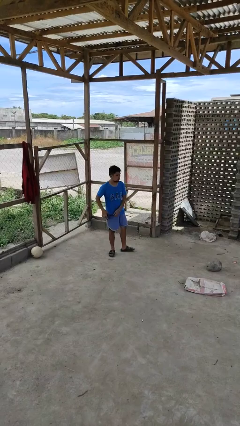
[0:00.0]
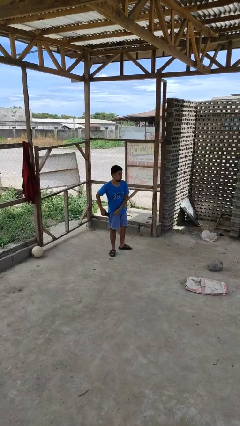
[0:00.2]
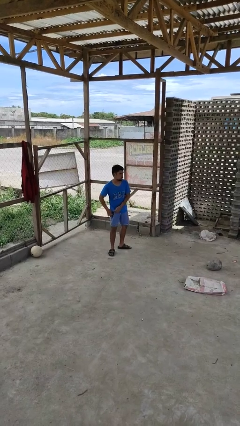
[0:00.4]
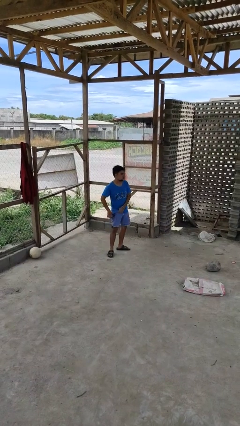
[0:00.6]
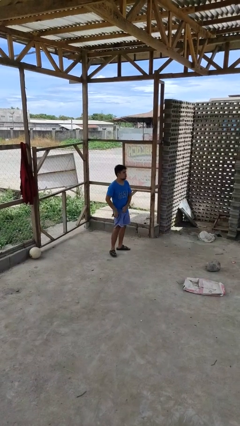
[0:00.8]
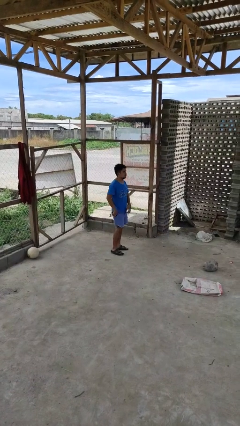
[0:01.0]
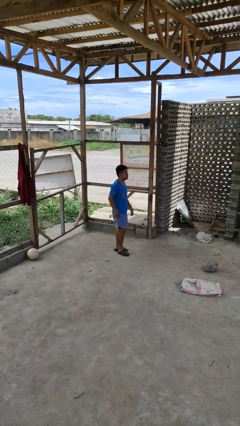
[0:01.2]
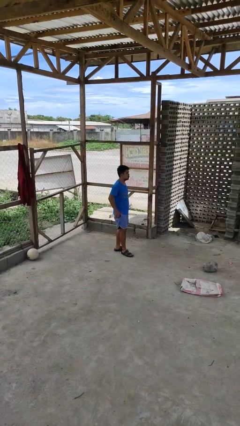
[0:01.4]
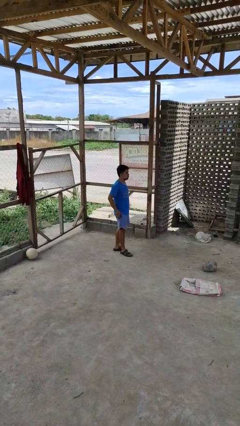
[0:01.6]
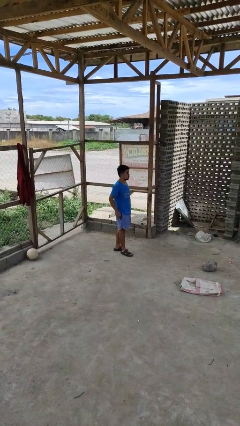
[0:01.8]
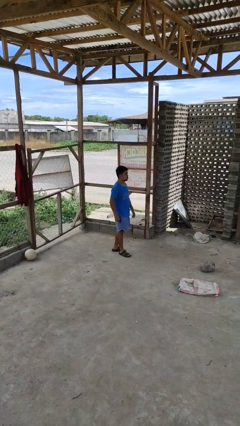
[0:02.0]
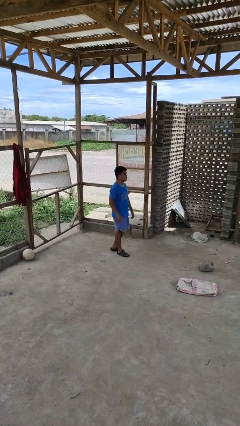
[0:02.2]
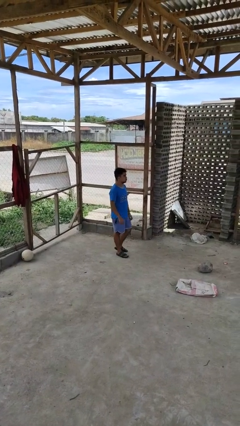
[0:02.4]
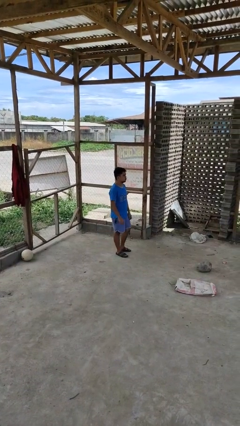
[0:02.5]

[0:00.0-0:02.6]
person puts phone into pocket

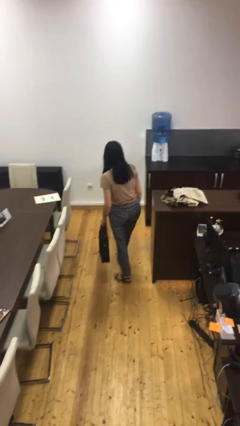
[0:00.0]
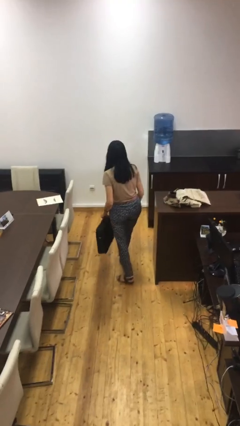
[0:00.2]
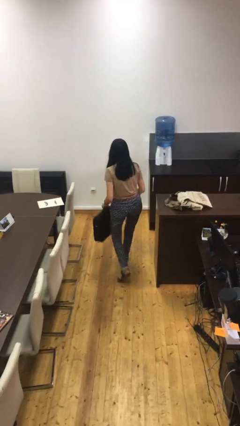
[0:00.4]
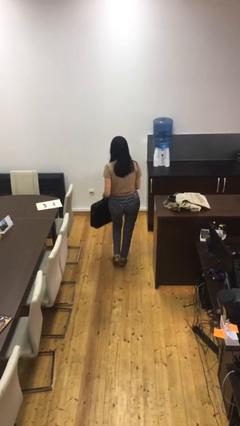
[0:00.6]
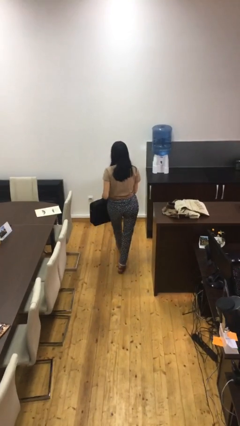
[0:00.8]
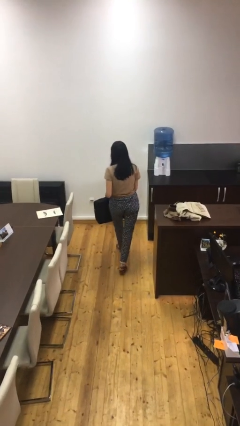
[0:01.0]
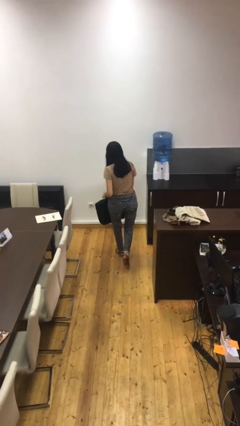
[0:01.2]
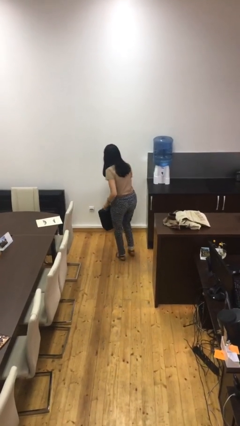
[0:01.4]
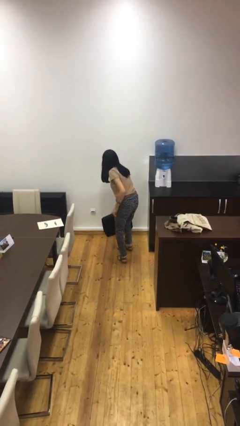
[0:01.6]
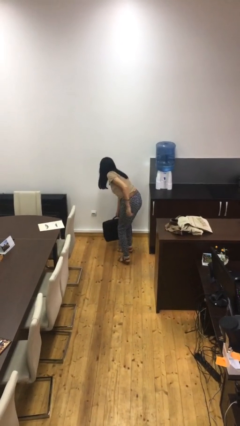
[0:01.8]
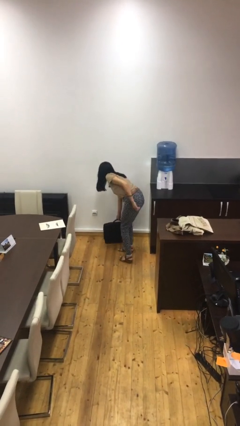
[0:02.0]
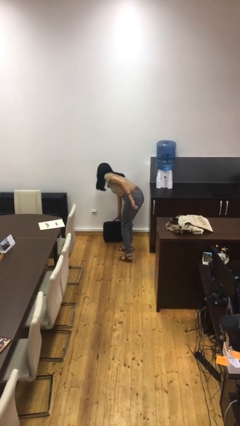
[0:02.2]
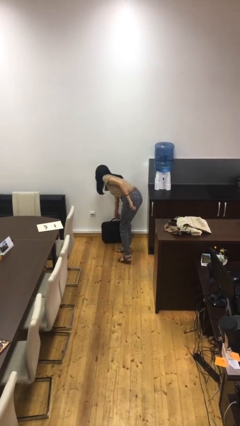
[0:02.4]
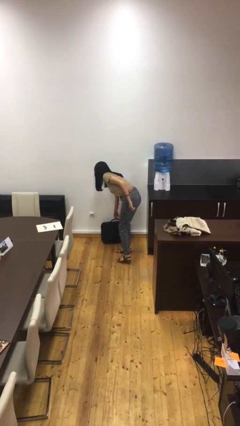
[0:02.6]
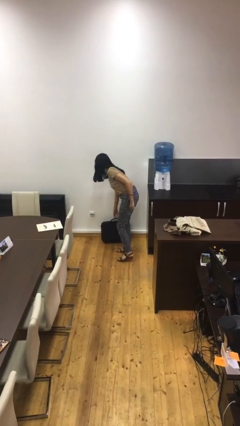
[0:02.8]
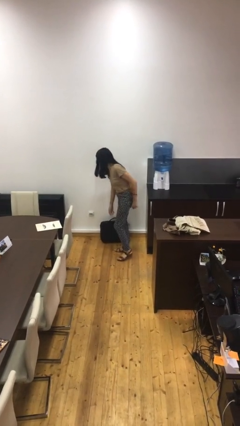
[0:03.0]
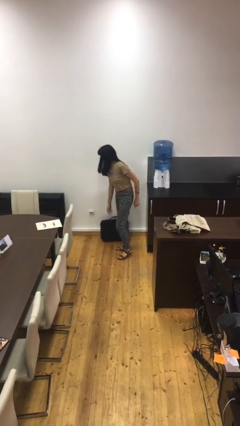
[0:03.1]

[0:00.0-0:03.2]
person puts down object on floor

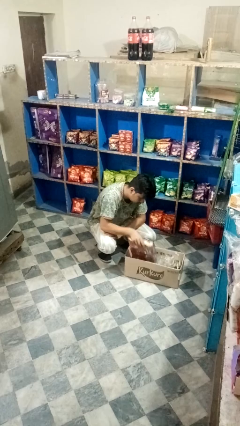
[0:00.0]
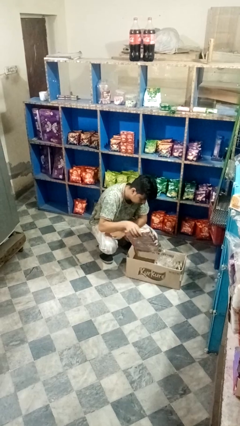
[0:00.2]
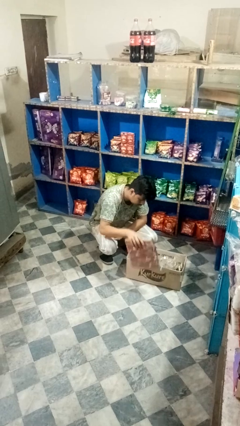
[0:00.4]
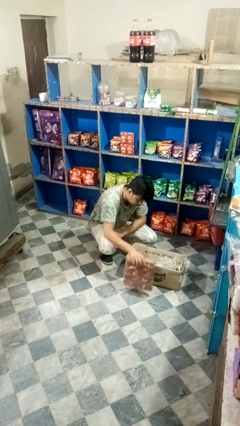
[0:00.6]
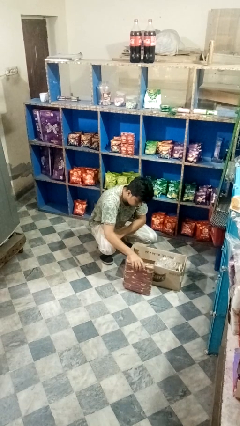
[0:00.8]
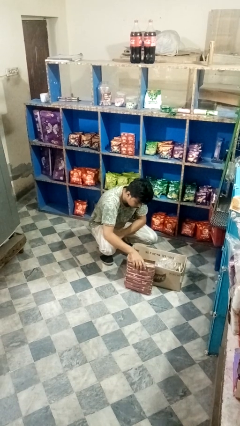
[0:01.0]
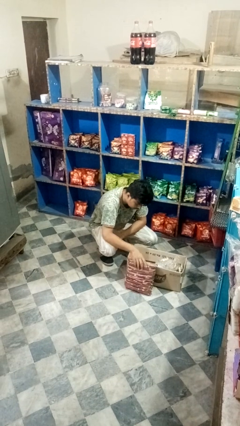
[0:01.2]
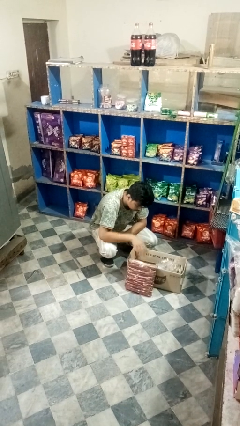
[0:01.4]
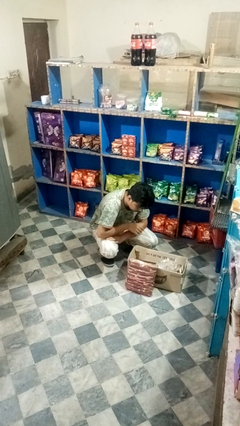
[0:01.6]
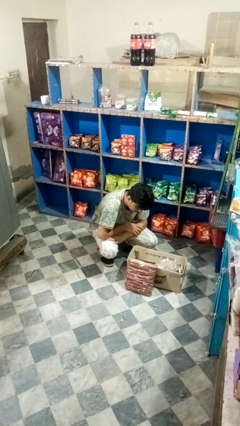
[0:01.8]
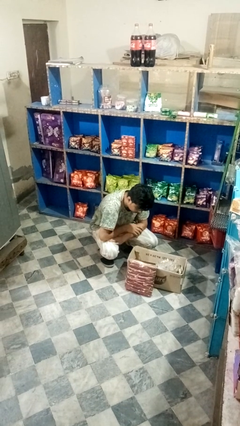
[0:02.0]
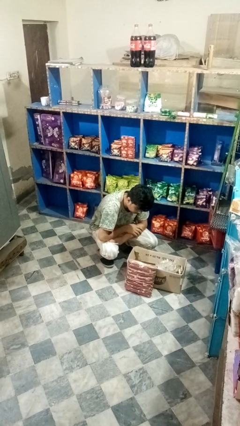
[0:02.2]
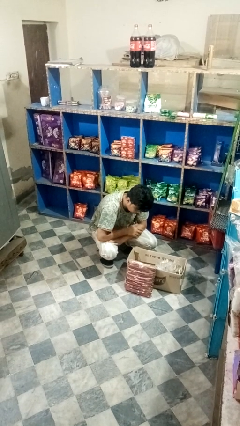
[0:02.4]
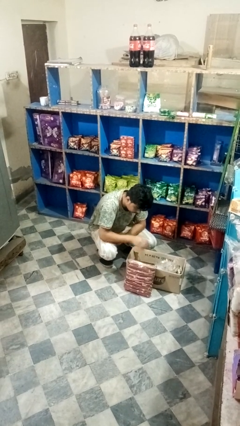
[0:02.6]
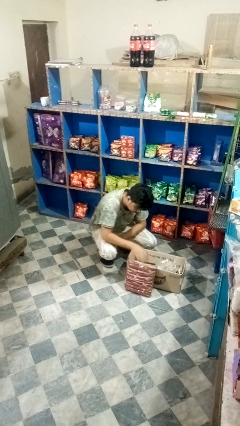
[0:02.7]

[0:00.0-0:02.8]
person takes object from box

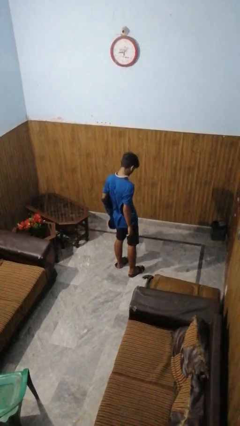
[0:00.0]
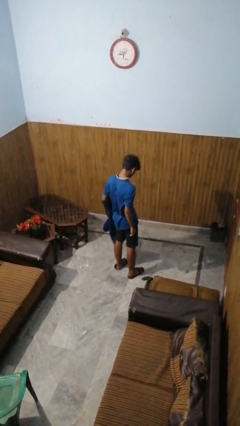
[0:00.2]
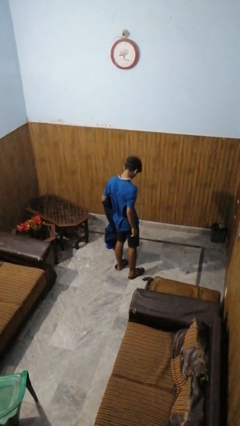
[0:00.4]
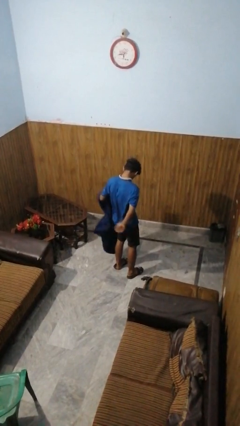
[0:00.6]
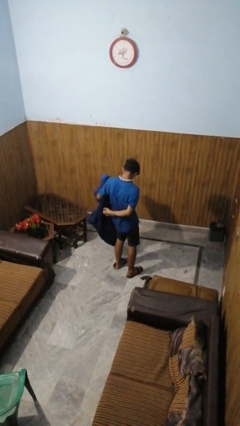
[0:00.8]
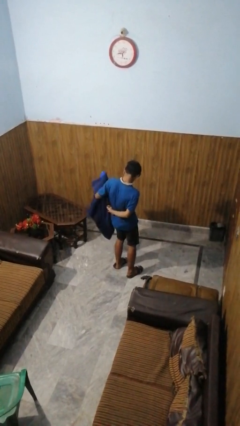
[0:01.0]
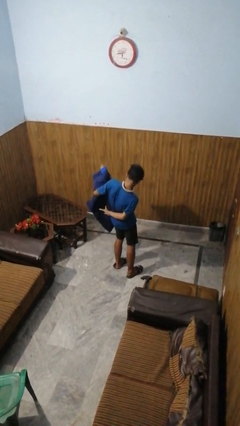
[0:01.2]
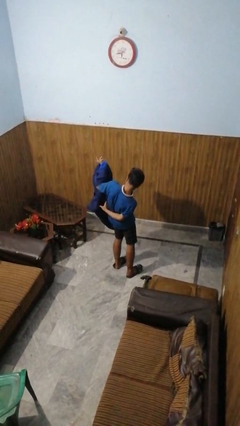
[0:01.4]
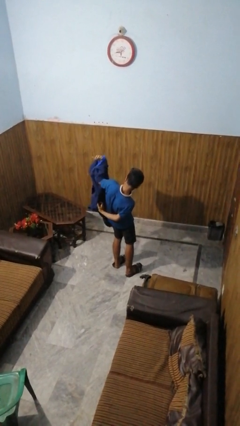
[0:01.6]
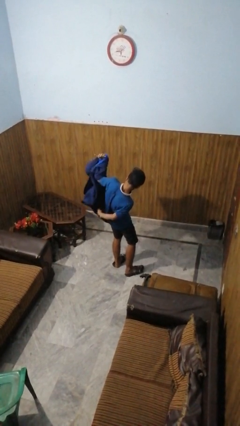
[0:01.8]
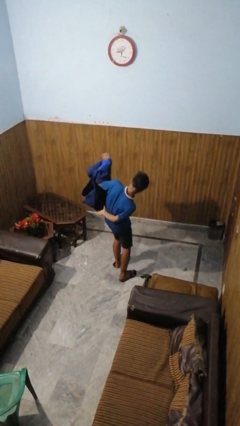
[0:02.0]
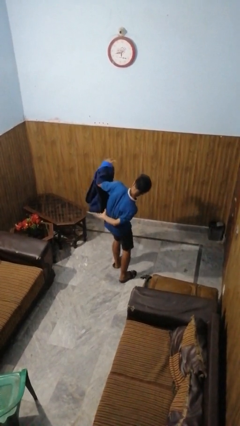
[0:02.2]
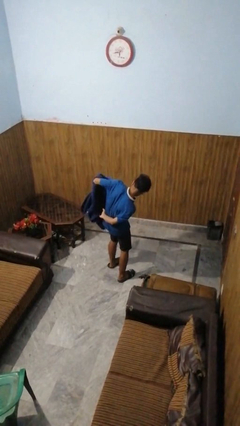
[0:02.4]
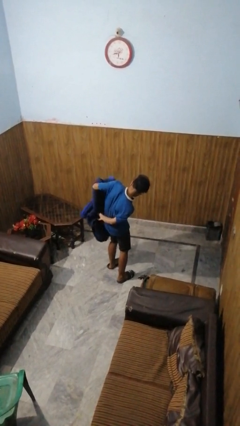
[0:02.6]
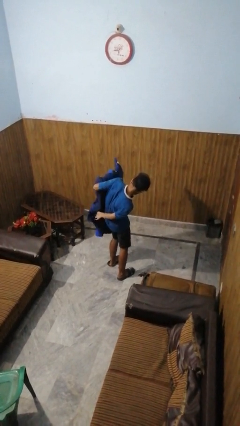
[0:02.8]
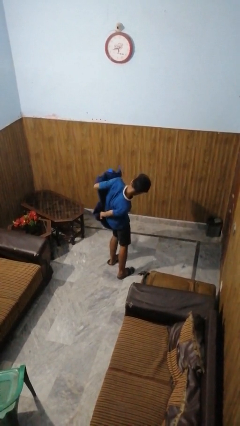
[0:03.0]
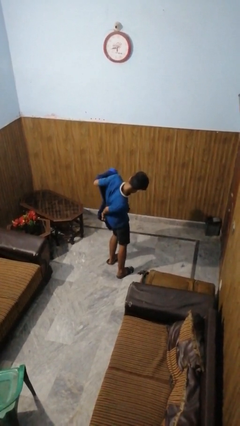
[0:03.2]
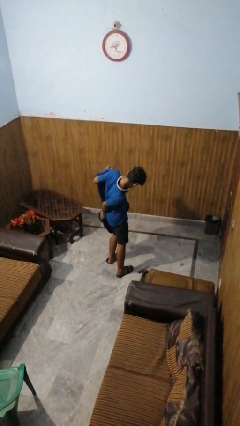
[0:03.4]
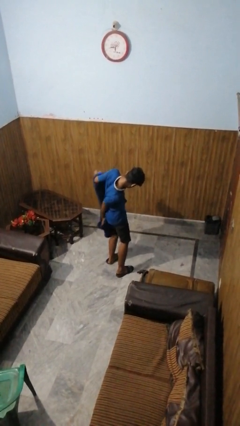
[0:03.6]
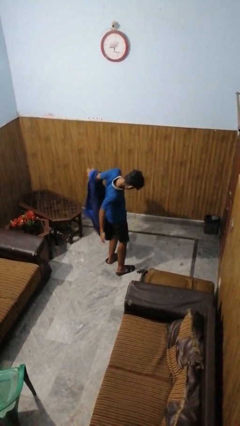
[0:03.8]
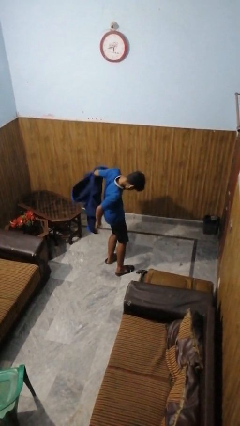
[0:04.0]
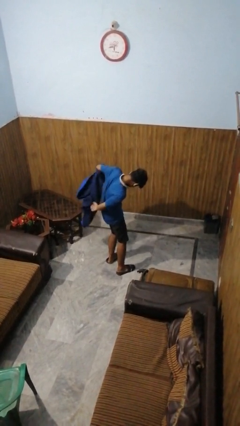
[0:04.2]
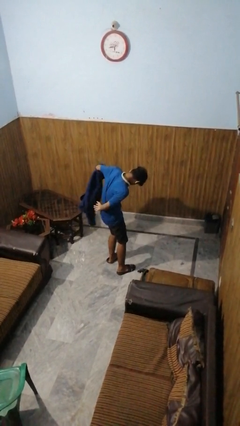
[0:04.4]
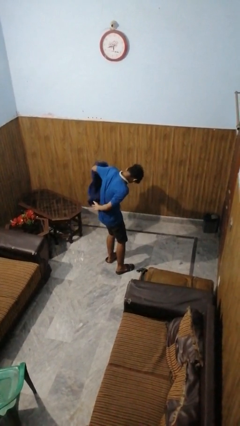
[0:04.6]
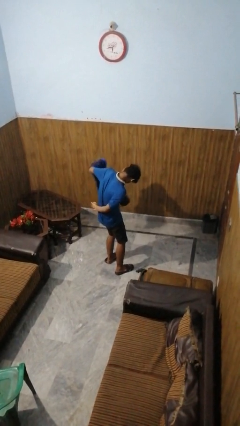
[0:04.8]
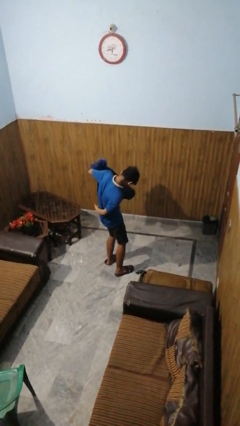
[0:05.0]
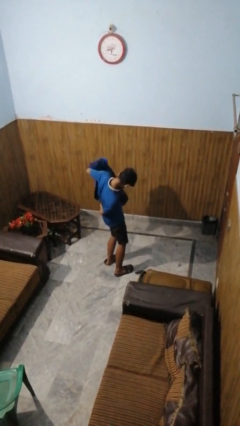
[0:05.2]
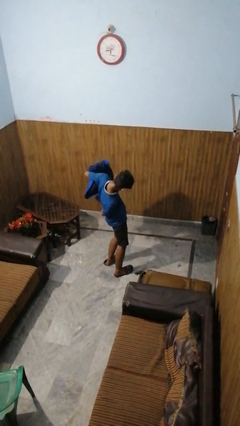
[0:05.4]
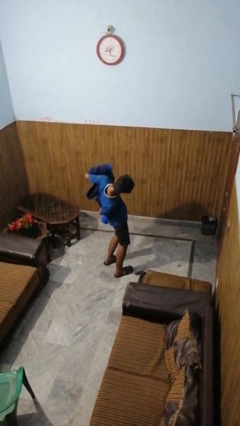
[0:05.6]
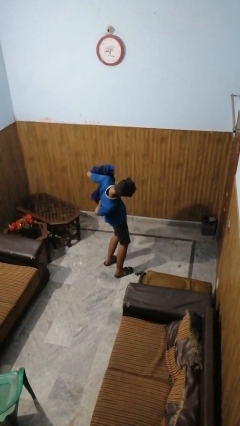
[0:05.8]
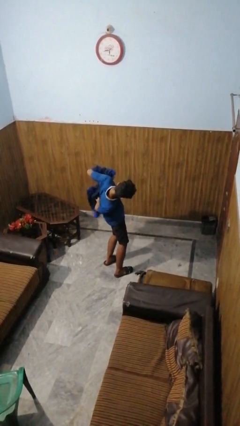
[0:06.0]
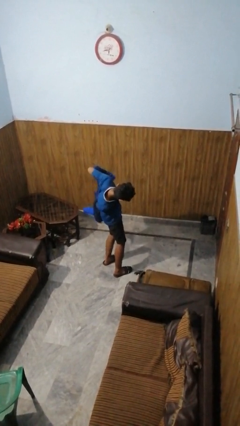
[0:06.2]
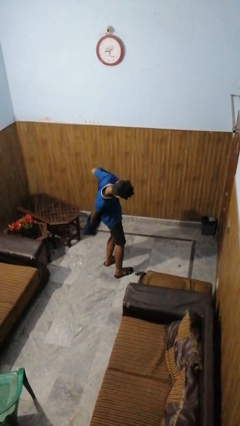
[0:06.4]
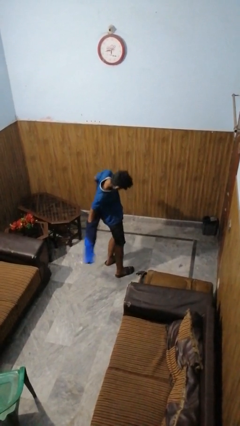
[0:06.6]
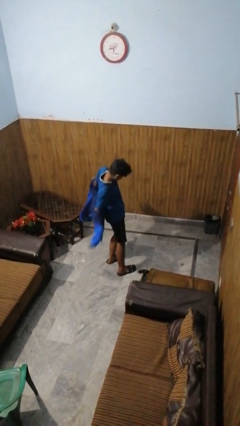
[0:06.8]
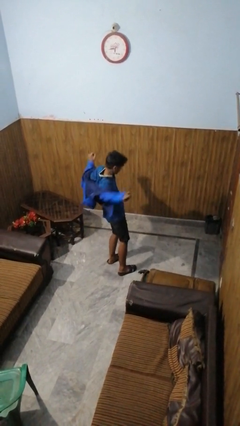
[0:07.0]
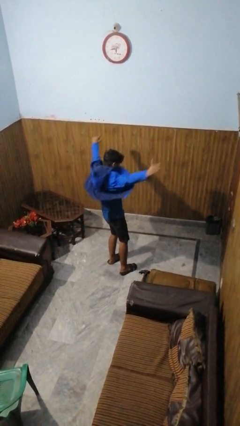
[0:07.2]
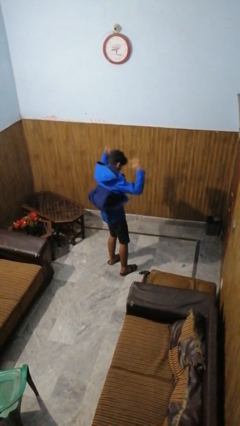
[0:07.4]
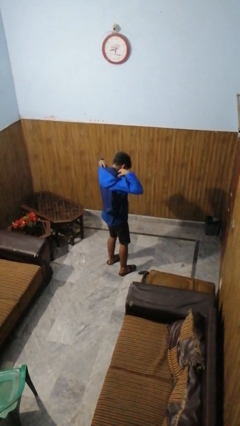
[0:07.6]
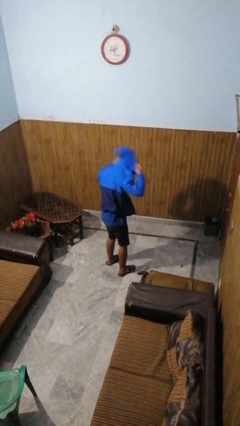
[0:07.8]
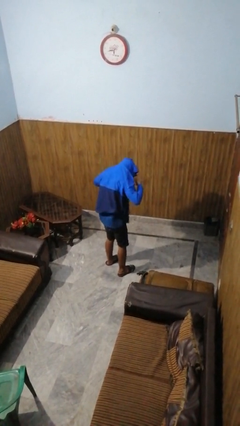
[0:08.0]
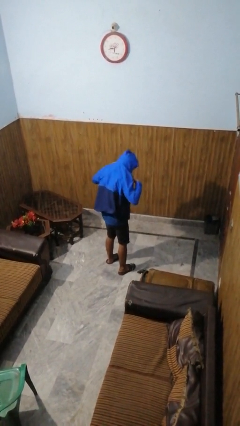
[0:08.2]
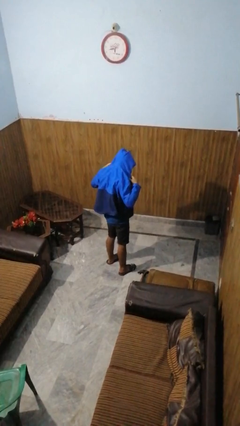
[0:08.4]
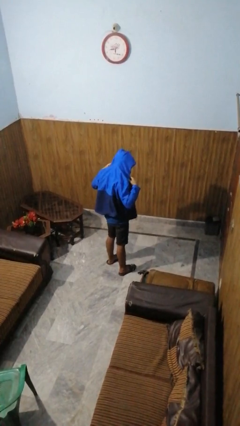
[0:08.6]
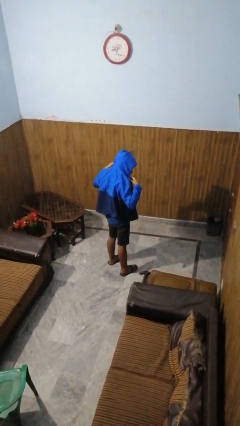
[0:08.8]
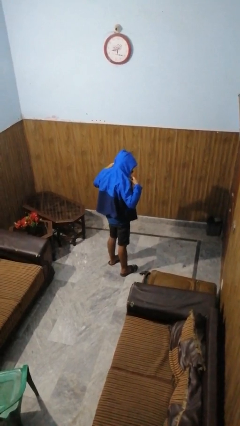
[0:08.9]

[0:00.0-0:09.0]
person puts on hoodie
